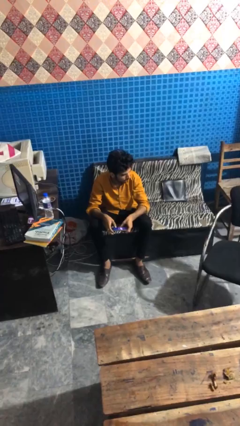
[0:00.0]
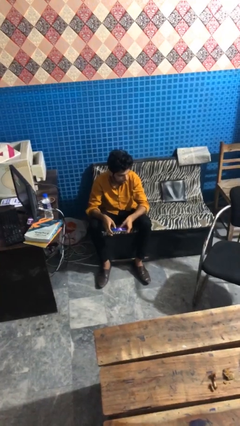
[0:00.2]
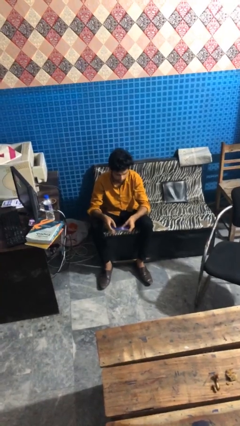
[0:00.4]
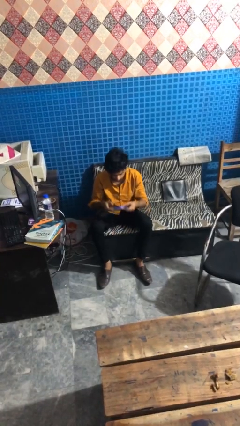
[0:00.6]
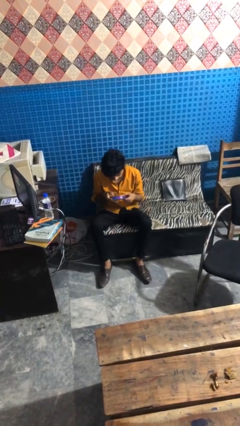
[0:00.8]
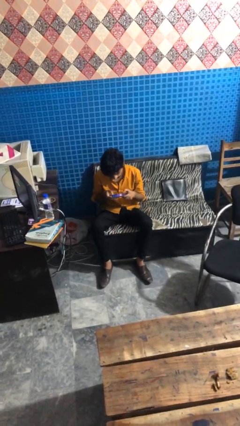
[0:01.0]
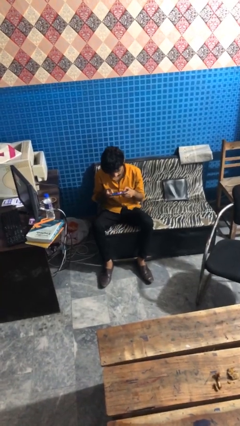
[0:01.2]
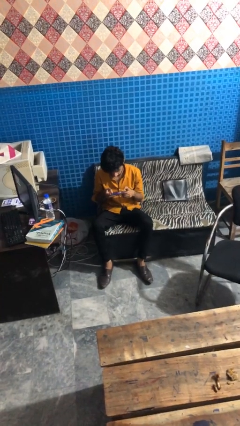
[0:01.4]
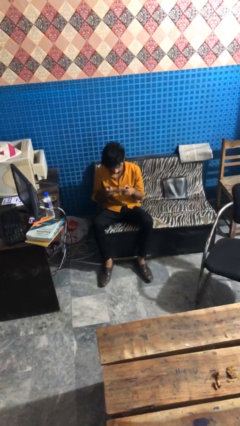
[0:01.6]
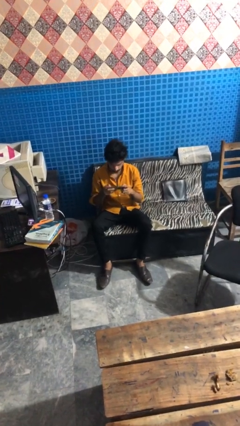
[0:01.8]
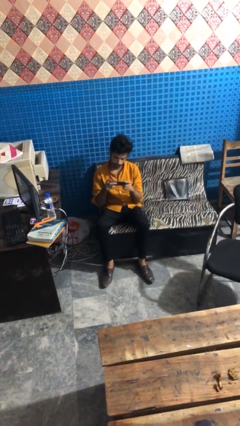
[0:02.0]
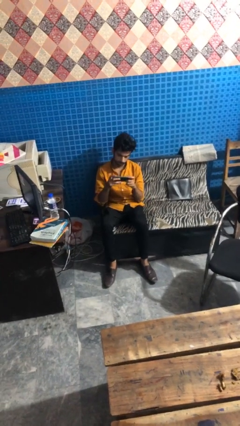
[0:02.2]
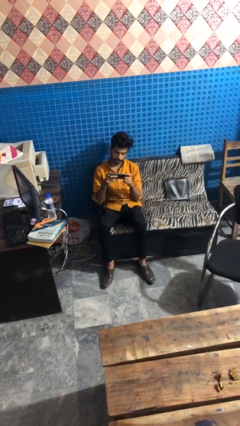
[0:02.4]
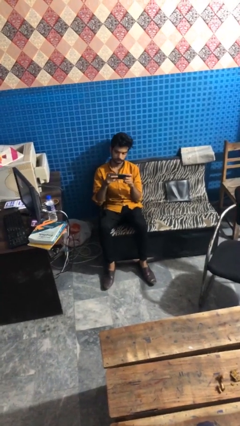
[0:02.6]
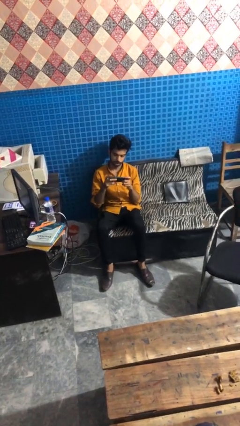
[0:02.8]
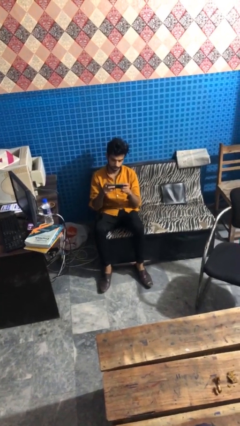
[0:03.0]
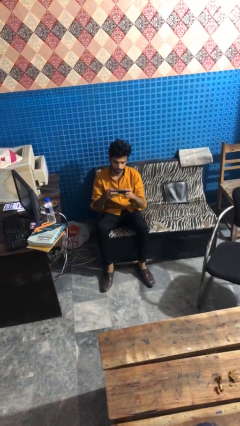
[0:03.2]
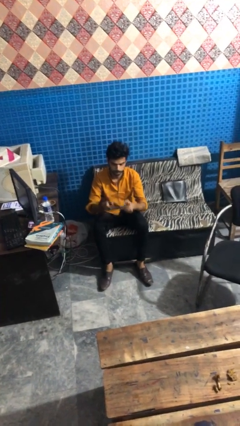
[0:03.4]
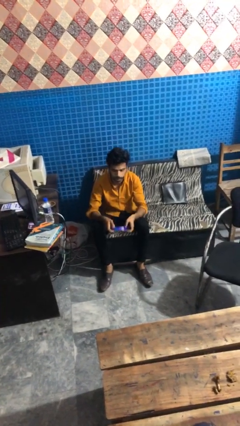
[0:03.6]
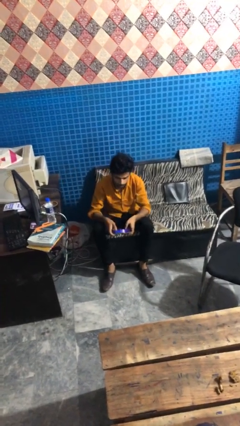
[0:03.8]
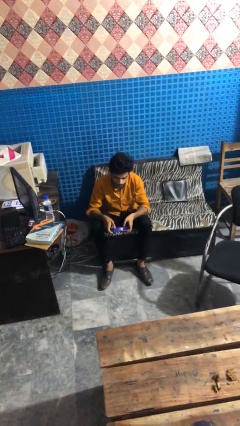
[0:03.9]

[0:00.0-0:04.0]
person interacts with handheld game

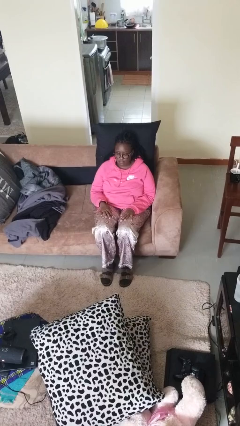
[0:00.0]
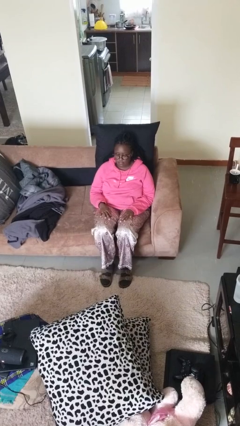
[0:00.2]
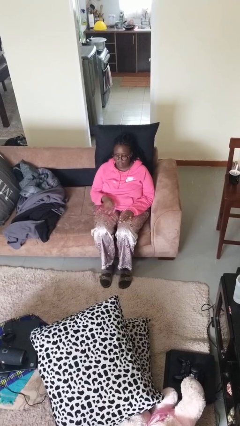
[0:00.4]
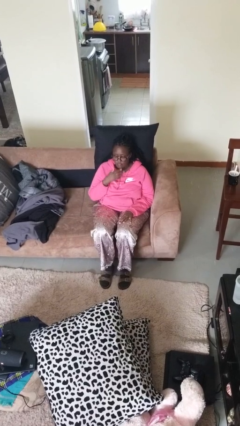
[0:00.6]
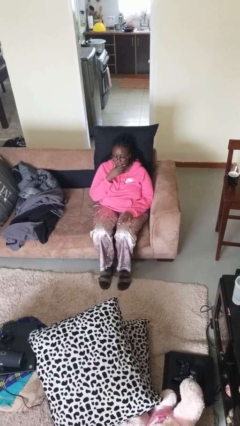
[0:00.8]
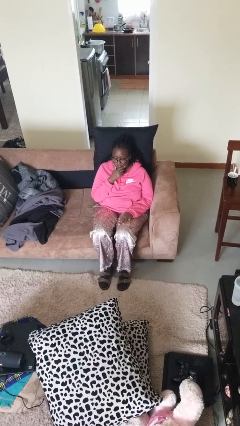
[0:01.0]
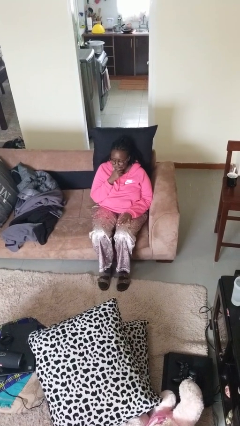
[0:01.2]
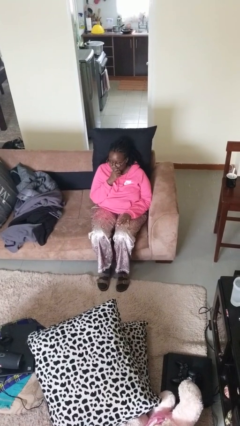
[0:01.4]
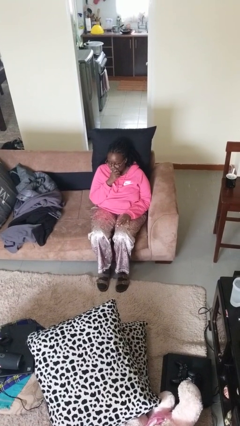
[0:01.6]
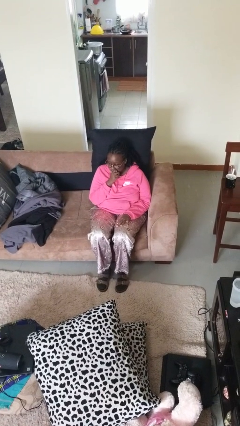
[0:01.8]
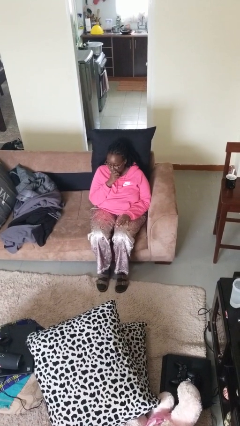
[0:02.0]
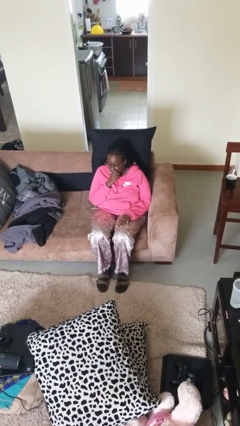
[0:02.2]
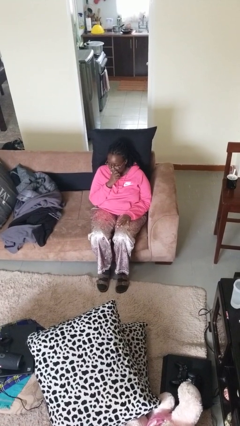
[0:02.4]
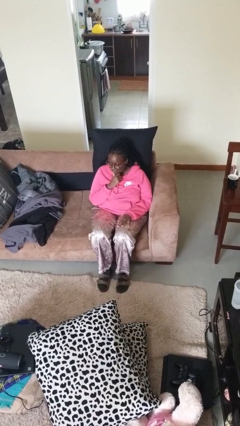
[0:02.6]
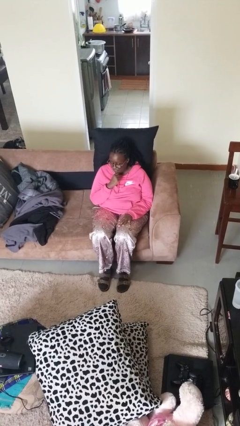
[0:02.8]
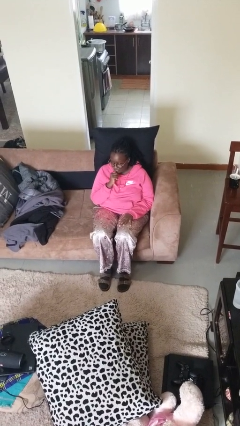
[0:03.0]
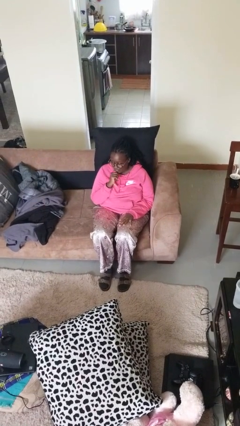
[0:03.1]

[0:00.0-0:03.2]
person strokes chin

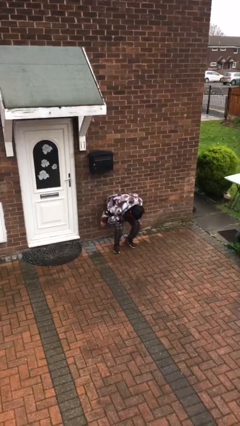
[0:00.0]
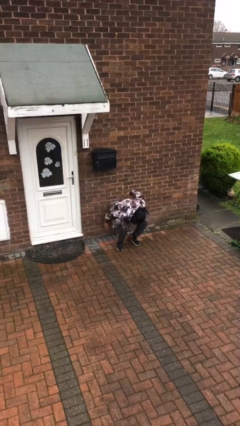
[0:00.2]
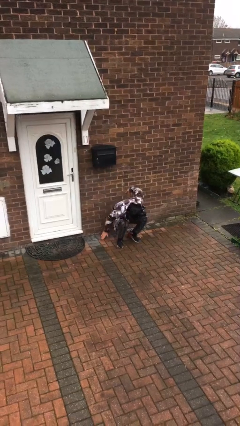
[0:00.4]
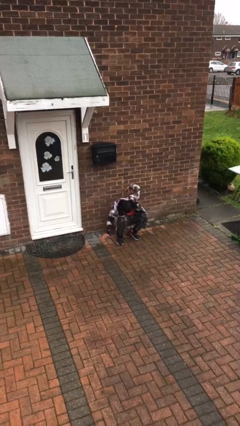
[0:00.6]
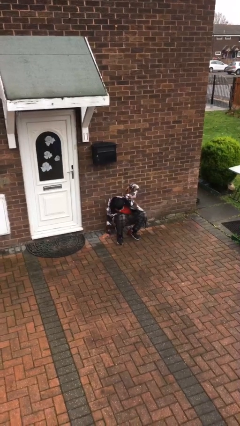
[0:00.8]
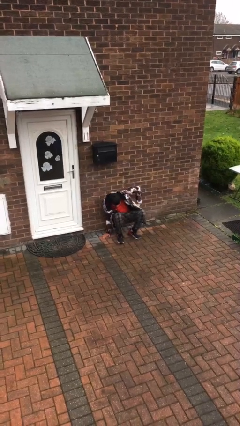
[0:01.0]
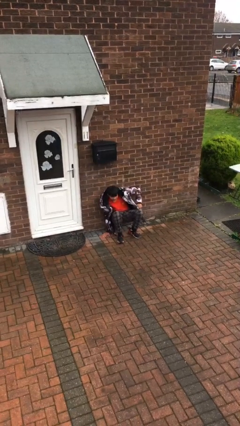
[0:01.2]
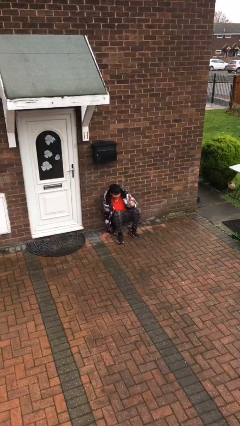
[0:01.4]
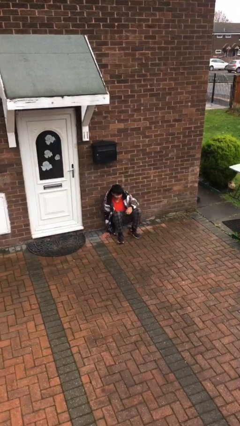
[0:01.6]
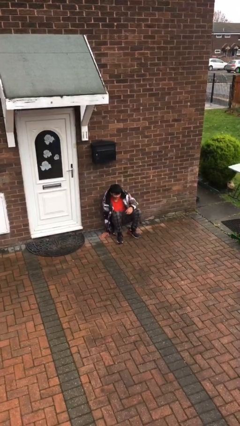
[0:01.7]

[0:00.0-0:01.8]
person sits down

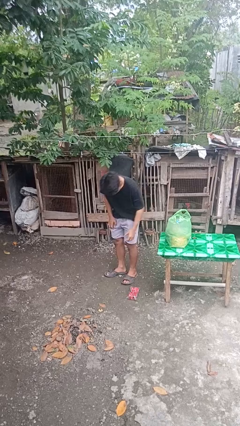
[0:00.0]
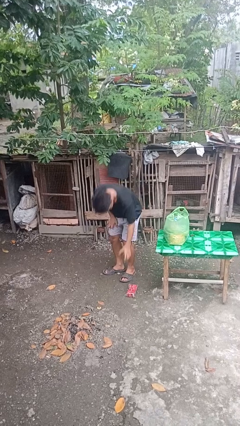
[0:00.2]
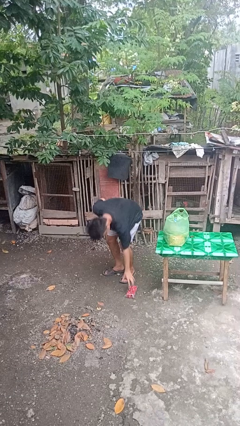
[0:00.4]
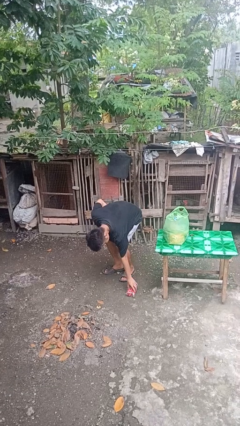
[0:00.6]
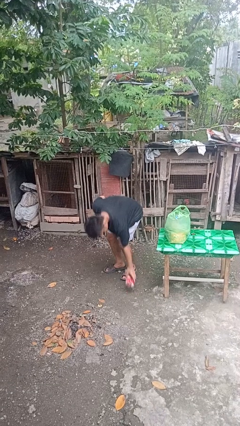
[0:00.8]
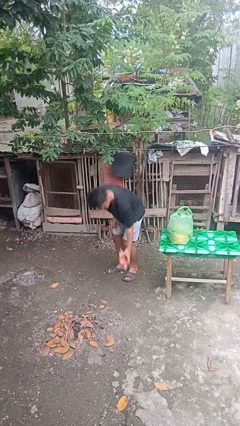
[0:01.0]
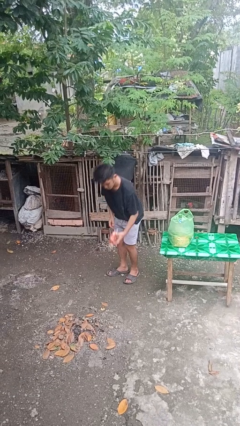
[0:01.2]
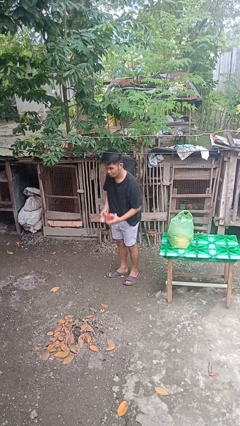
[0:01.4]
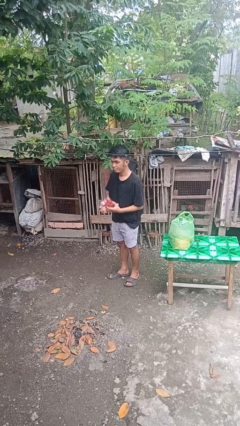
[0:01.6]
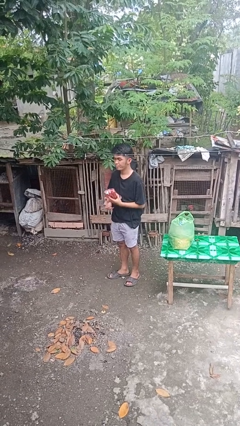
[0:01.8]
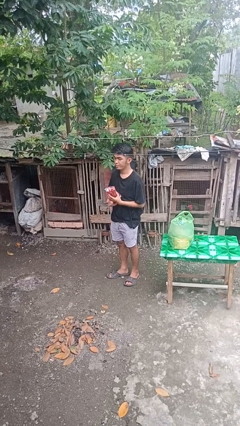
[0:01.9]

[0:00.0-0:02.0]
person picks up object from floor

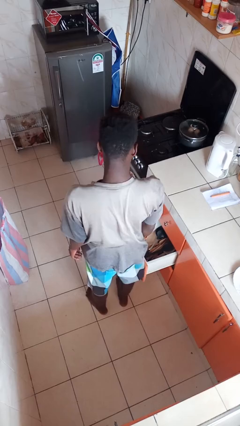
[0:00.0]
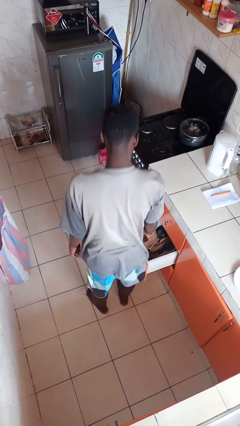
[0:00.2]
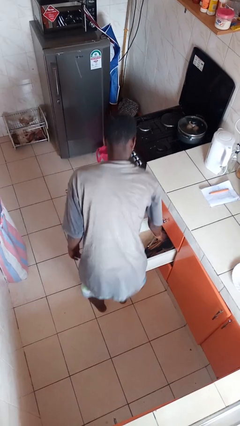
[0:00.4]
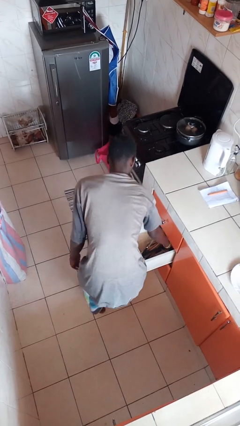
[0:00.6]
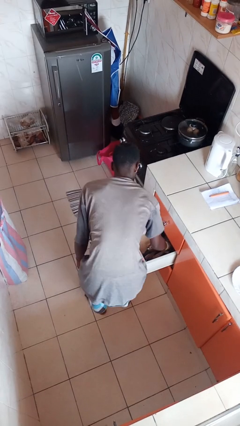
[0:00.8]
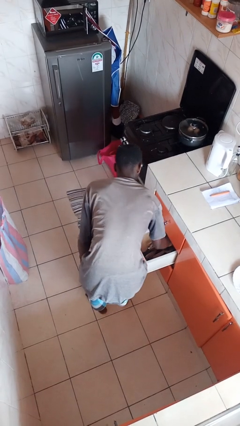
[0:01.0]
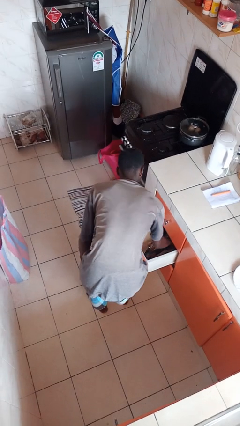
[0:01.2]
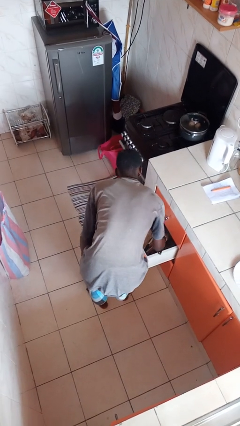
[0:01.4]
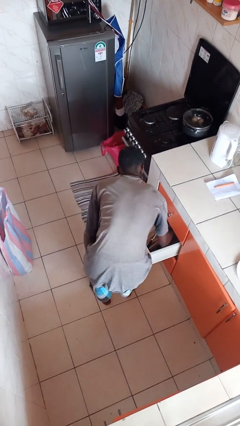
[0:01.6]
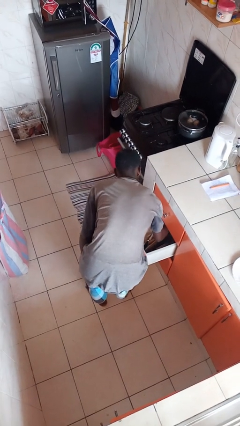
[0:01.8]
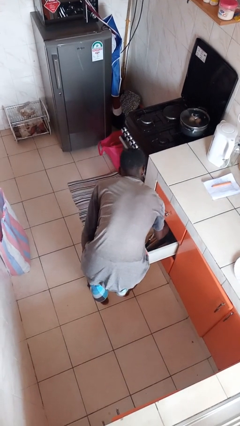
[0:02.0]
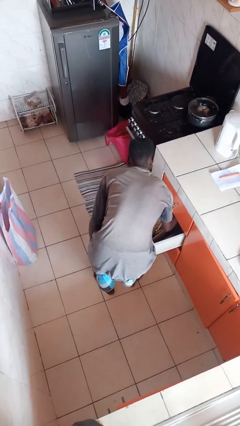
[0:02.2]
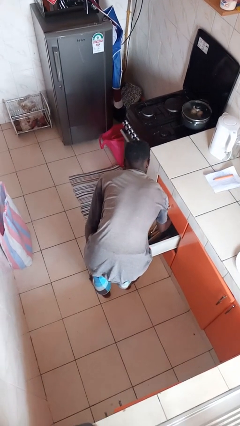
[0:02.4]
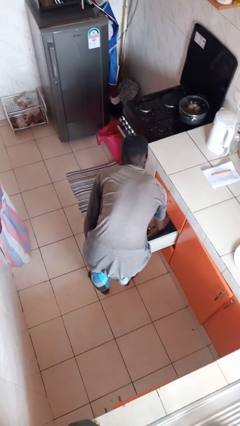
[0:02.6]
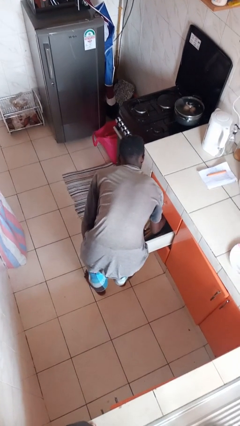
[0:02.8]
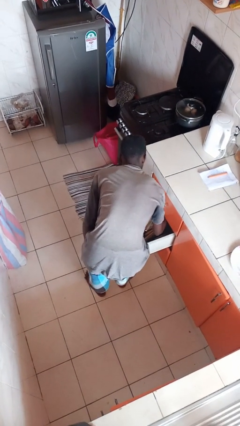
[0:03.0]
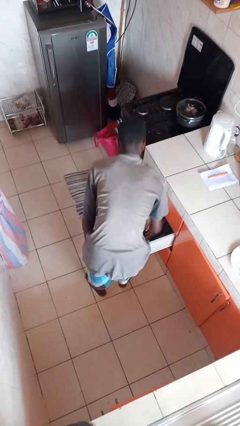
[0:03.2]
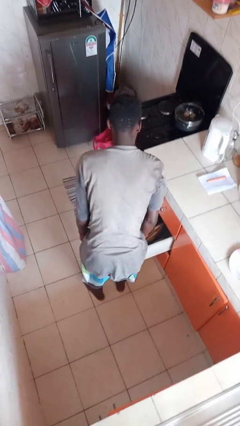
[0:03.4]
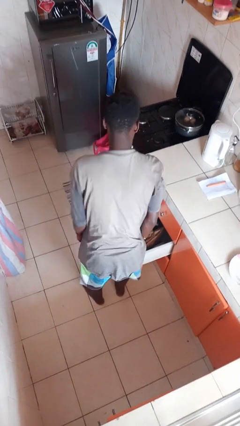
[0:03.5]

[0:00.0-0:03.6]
person searches in kitchen drawer

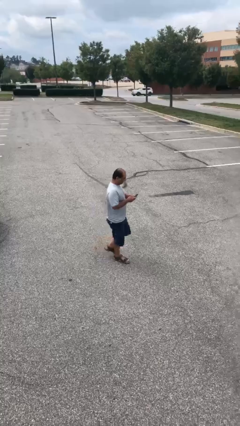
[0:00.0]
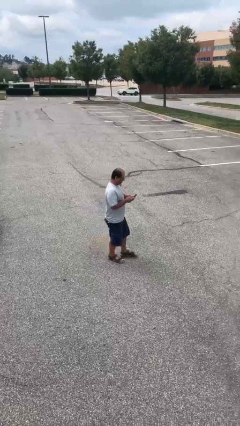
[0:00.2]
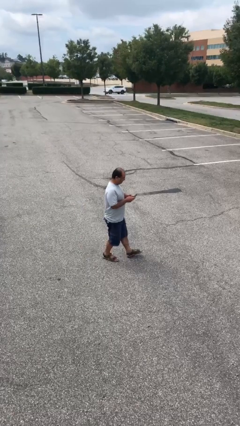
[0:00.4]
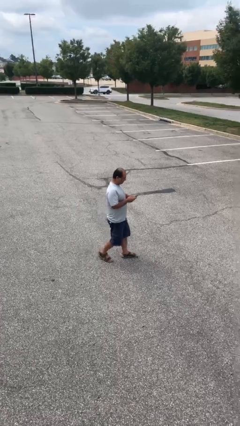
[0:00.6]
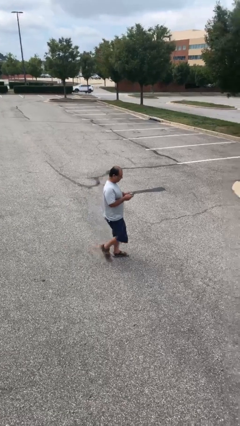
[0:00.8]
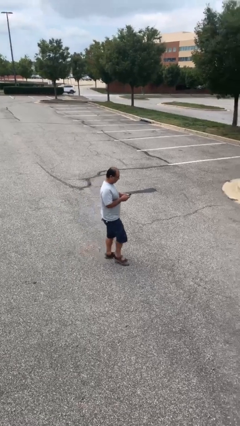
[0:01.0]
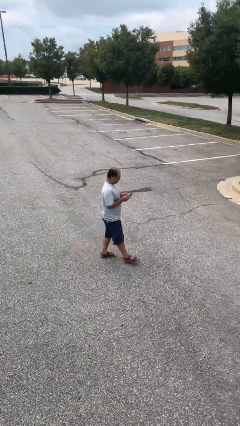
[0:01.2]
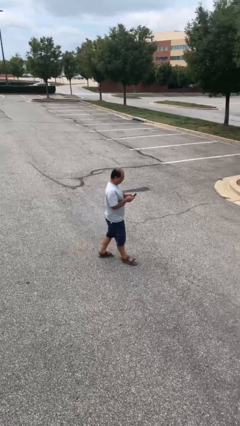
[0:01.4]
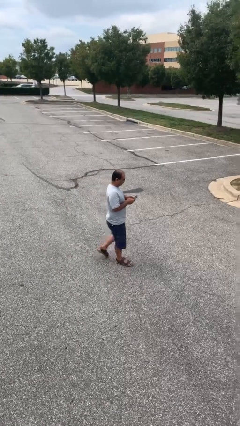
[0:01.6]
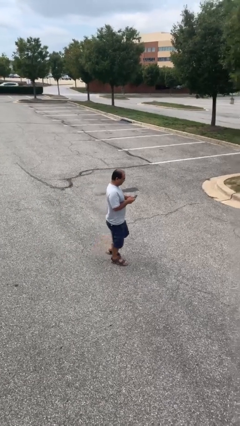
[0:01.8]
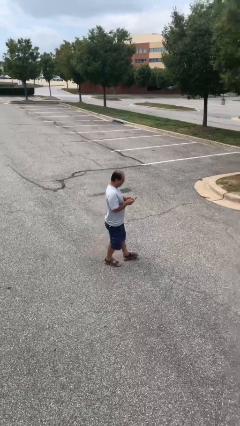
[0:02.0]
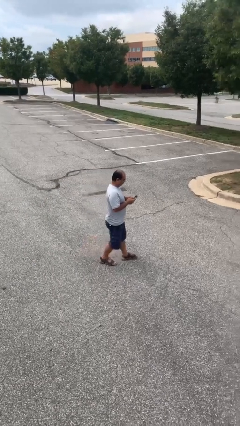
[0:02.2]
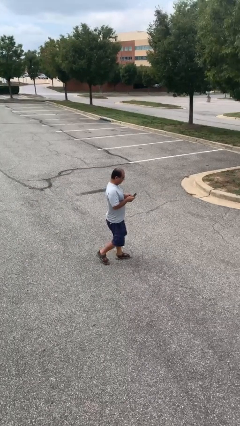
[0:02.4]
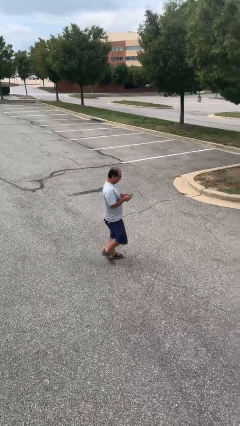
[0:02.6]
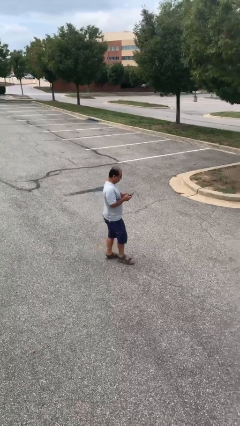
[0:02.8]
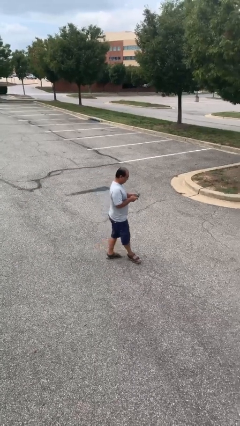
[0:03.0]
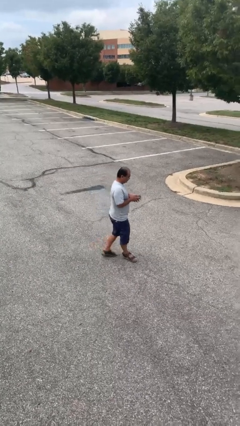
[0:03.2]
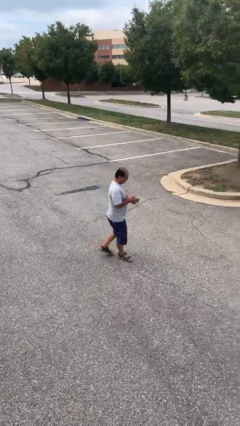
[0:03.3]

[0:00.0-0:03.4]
person texts on phone
